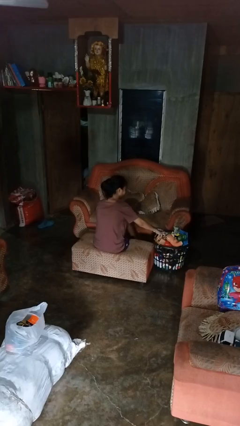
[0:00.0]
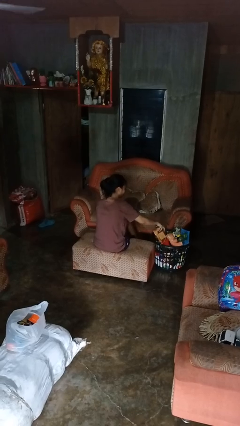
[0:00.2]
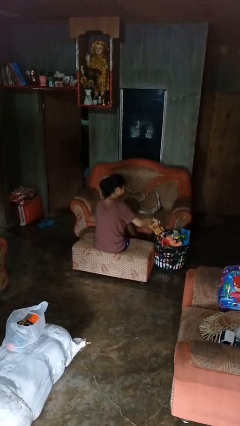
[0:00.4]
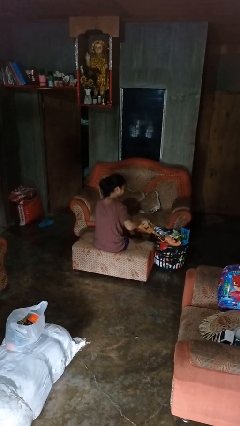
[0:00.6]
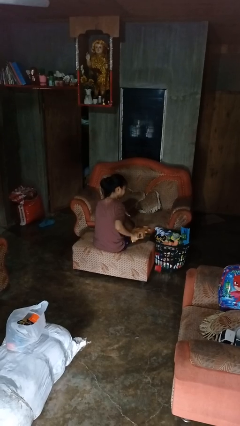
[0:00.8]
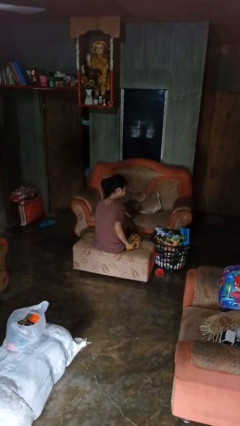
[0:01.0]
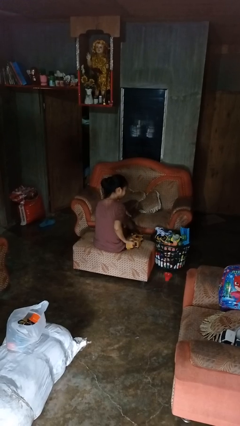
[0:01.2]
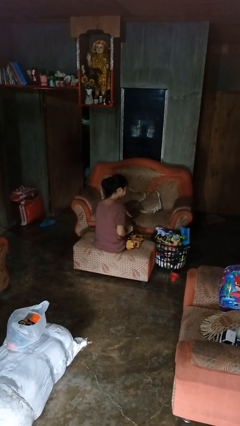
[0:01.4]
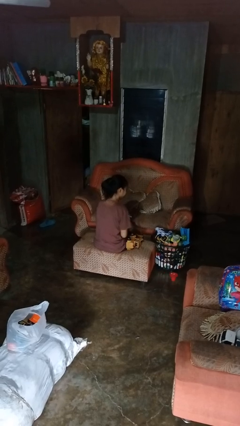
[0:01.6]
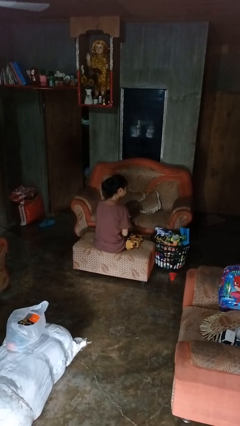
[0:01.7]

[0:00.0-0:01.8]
person takes object from basket

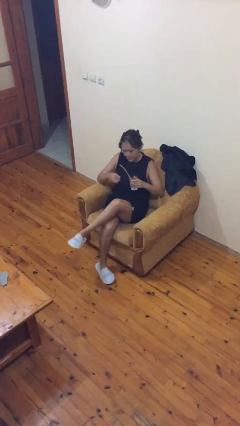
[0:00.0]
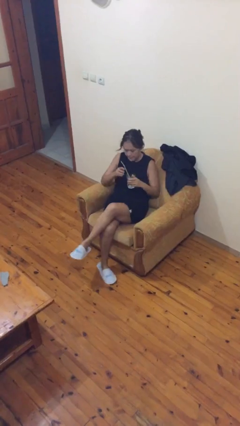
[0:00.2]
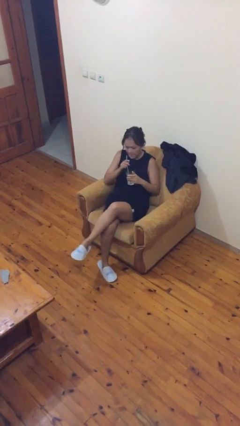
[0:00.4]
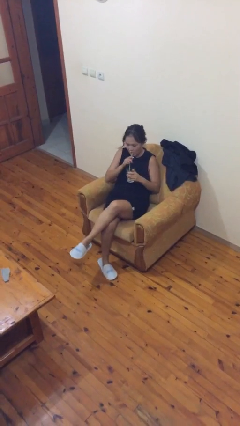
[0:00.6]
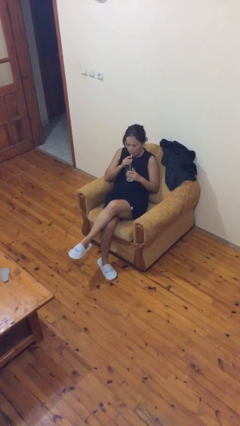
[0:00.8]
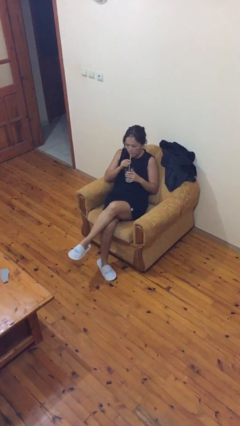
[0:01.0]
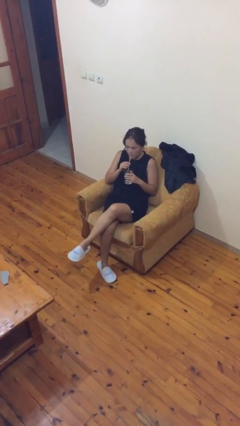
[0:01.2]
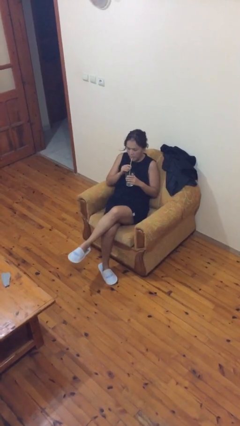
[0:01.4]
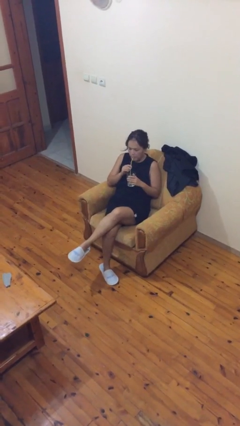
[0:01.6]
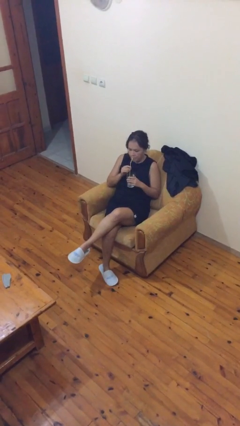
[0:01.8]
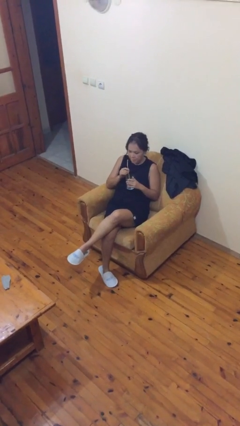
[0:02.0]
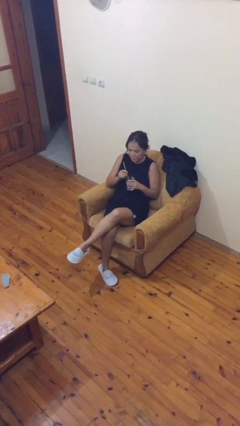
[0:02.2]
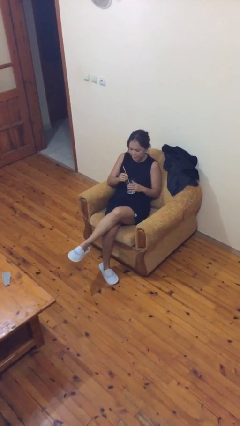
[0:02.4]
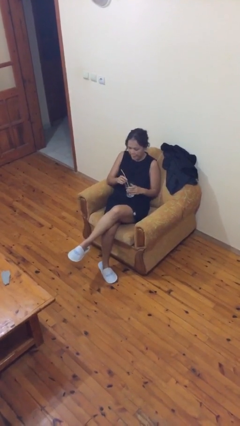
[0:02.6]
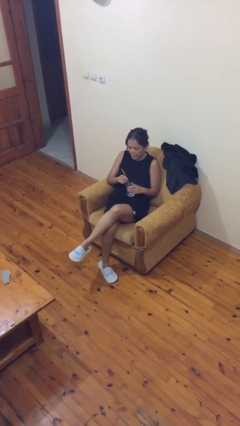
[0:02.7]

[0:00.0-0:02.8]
person drinks from straw

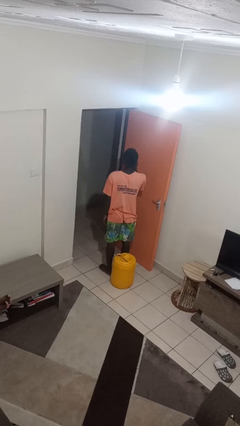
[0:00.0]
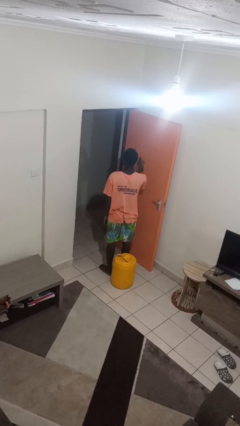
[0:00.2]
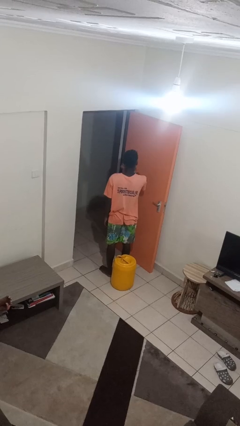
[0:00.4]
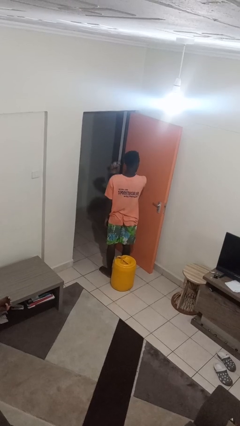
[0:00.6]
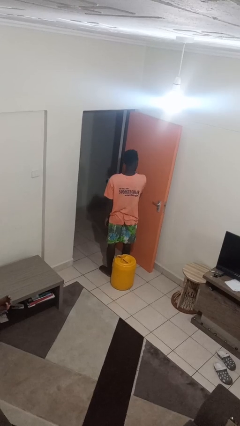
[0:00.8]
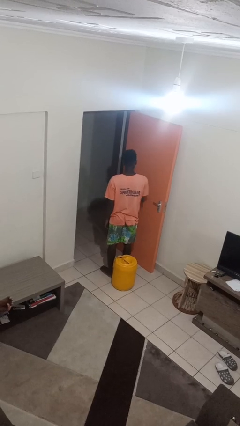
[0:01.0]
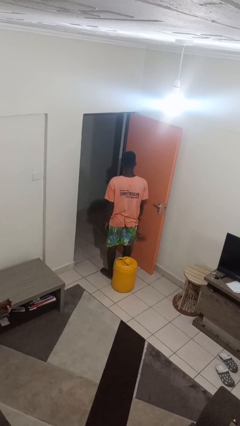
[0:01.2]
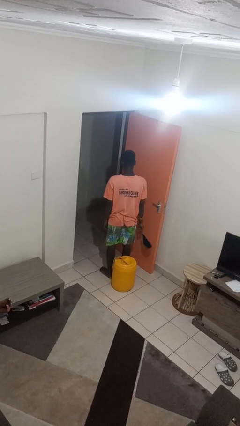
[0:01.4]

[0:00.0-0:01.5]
person takes off facemask

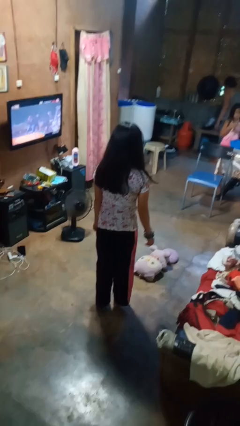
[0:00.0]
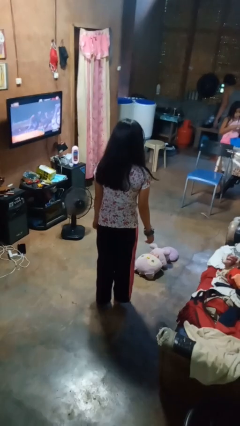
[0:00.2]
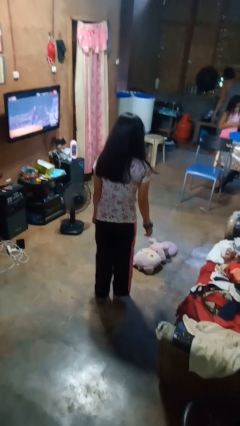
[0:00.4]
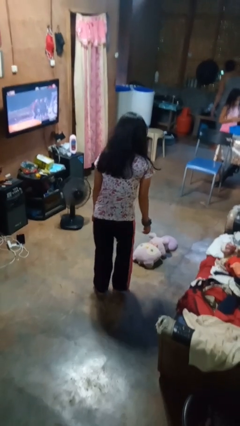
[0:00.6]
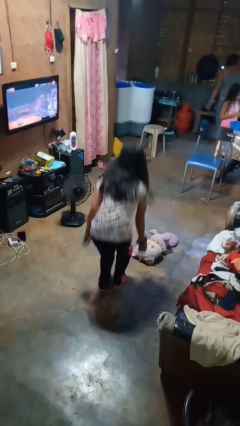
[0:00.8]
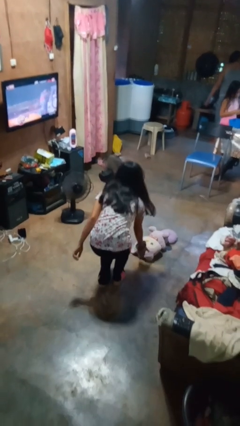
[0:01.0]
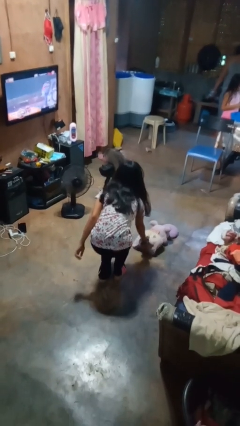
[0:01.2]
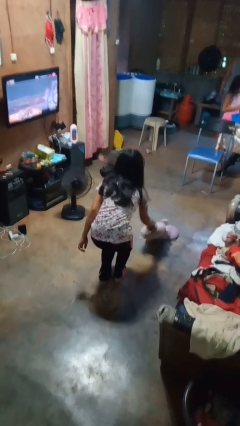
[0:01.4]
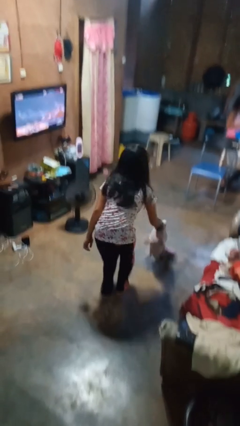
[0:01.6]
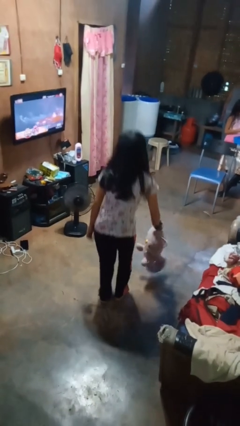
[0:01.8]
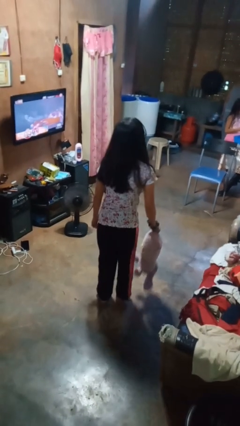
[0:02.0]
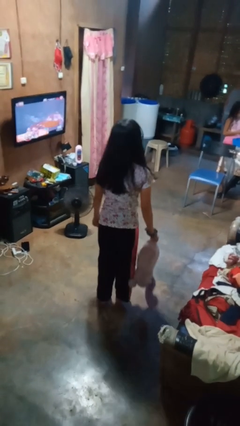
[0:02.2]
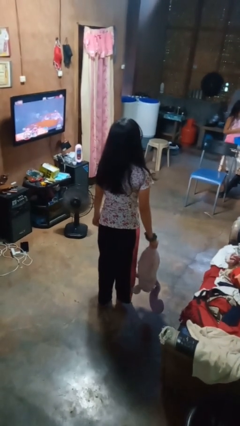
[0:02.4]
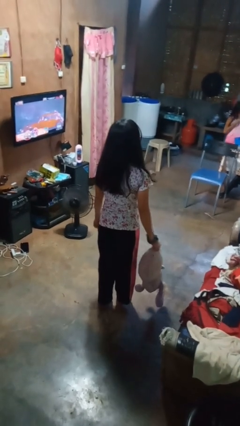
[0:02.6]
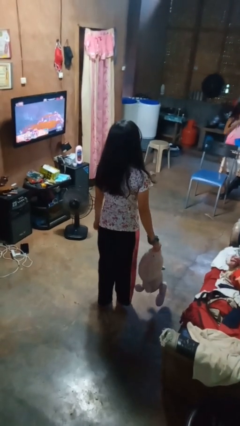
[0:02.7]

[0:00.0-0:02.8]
person picks up object from floor

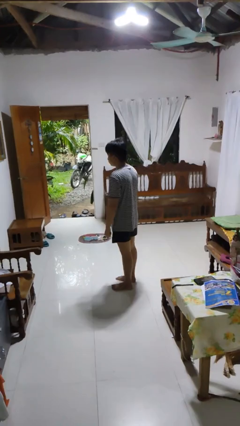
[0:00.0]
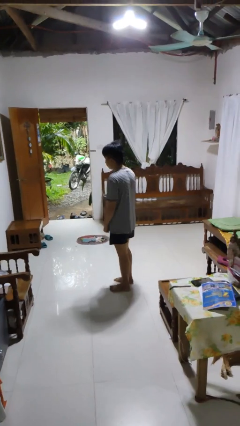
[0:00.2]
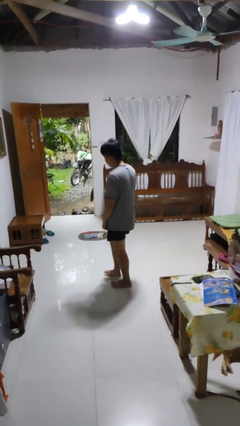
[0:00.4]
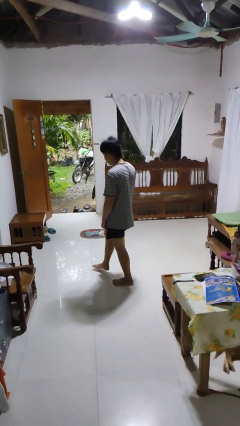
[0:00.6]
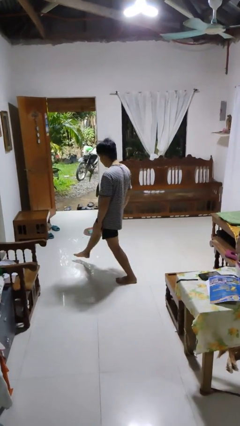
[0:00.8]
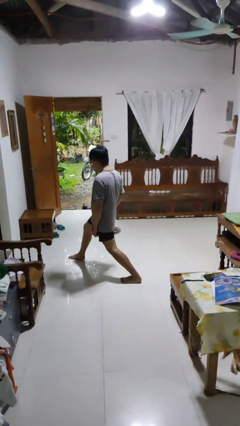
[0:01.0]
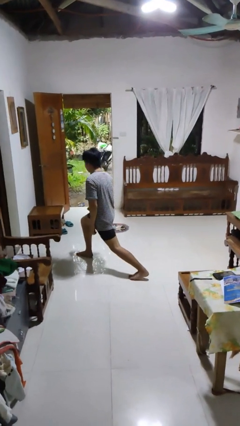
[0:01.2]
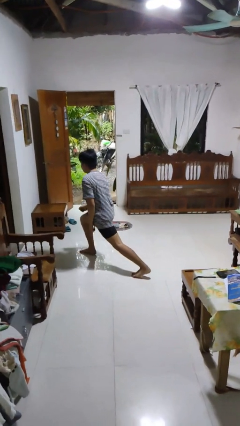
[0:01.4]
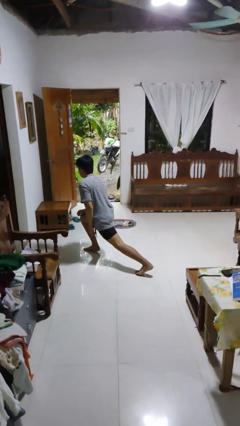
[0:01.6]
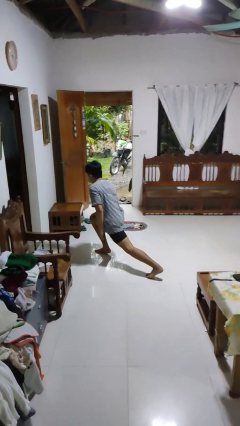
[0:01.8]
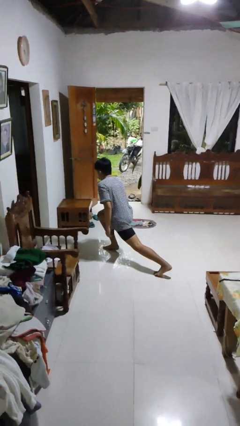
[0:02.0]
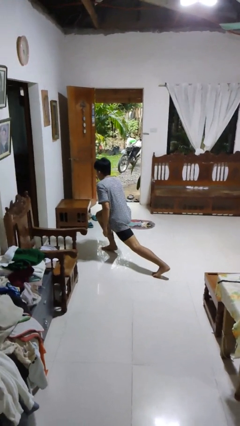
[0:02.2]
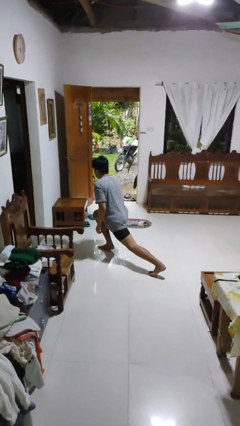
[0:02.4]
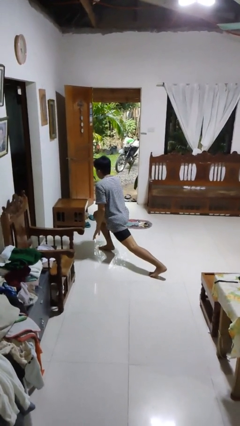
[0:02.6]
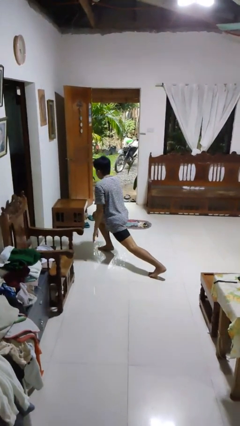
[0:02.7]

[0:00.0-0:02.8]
person exercises with lunges

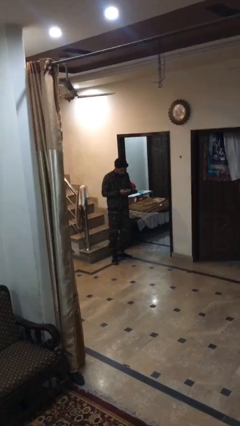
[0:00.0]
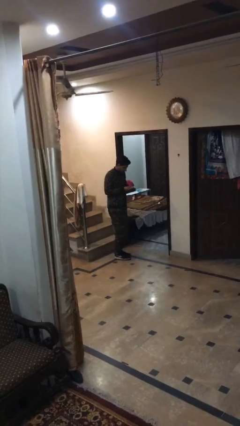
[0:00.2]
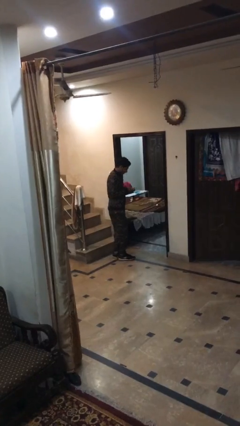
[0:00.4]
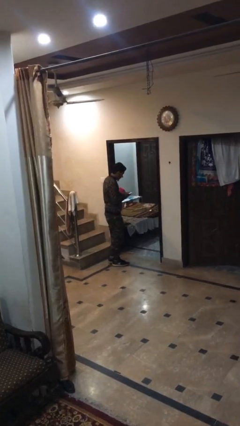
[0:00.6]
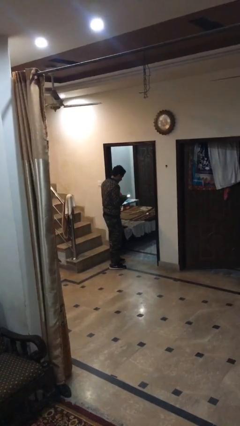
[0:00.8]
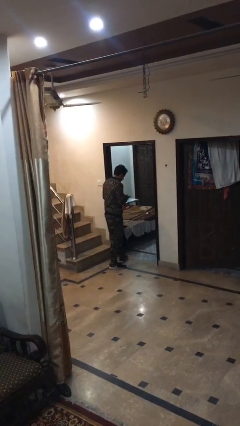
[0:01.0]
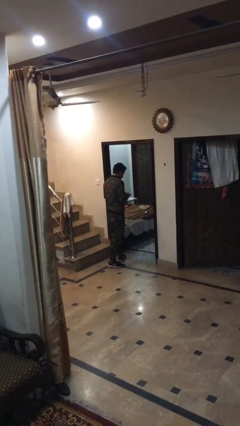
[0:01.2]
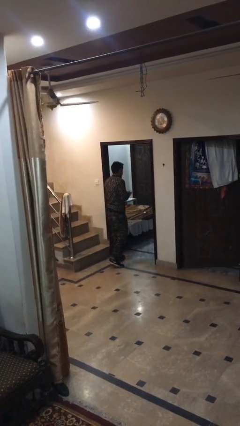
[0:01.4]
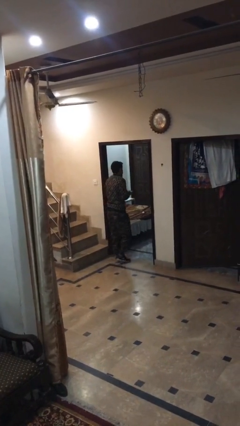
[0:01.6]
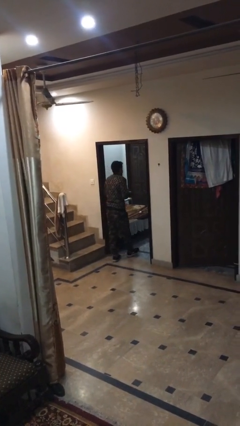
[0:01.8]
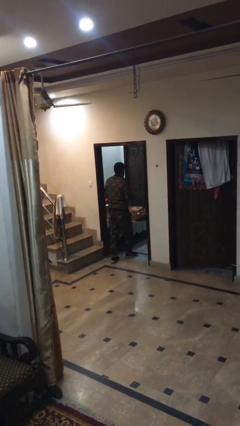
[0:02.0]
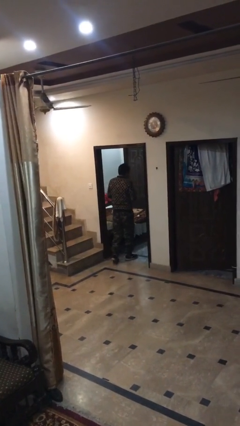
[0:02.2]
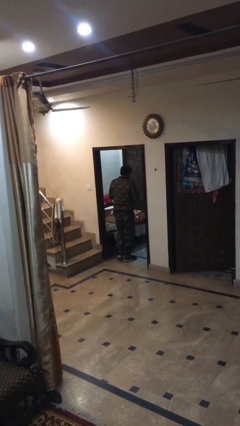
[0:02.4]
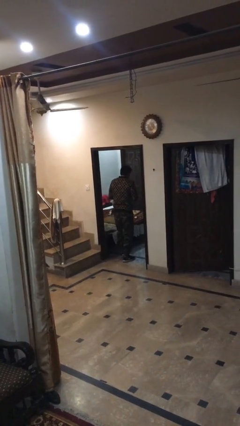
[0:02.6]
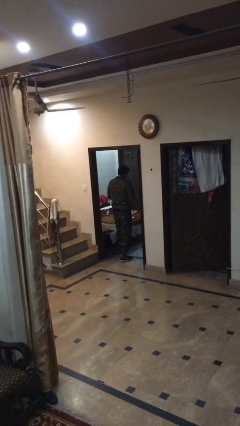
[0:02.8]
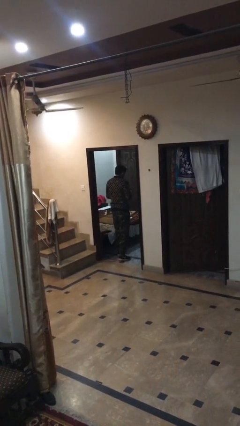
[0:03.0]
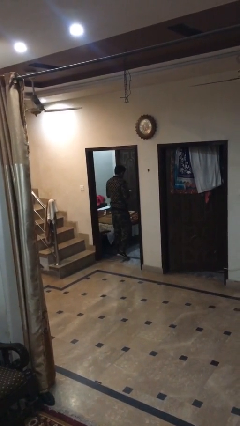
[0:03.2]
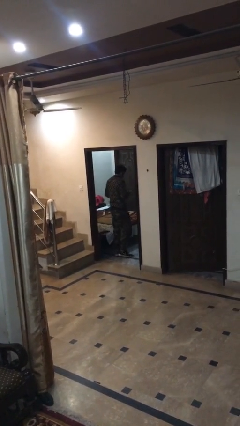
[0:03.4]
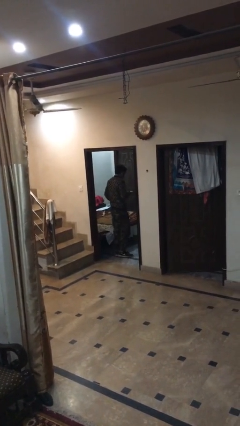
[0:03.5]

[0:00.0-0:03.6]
person enters scene through structure

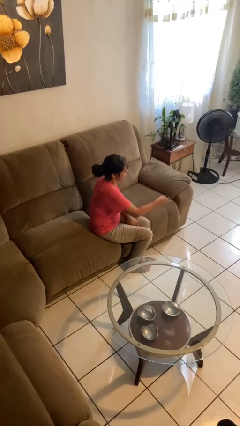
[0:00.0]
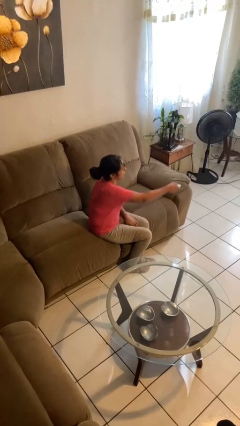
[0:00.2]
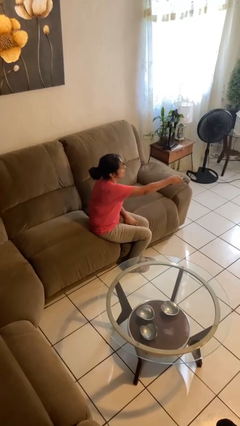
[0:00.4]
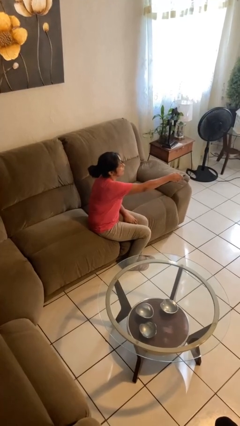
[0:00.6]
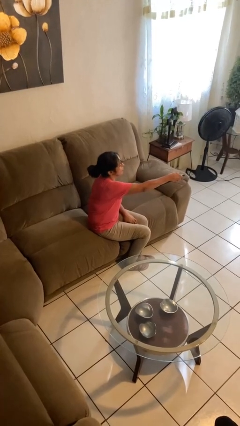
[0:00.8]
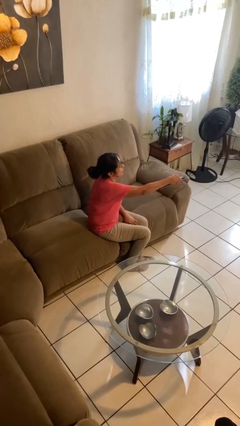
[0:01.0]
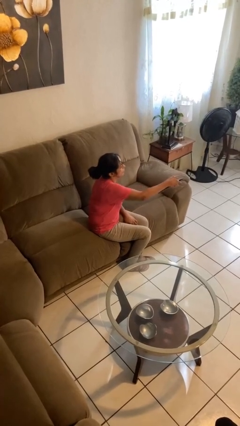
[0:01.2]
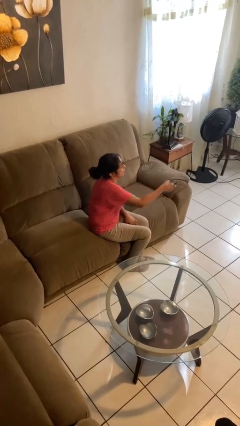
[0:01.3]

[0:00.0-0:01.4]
person uses television remote

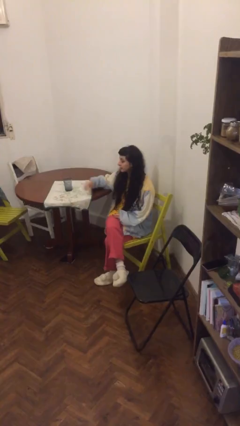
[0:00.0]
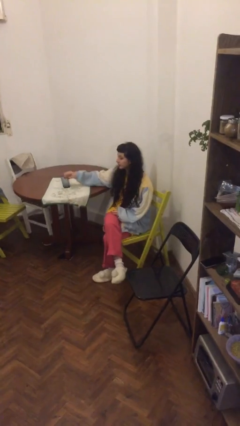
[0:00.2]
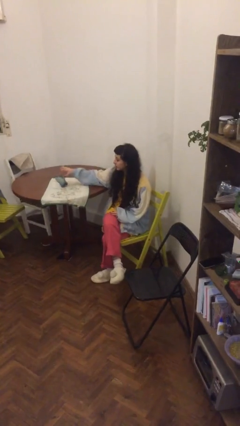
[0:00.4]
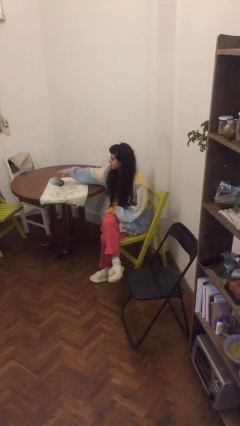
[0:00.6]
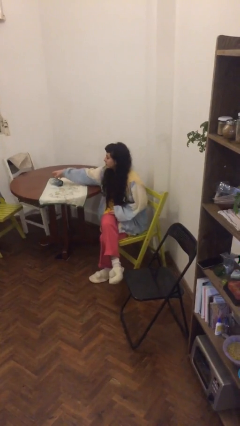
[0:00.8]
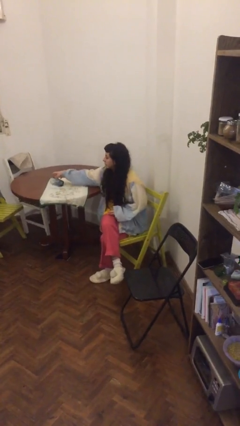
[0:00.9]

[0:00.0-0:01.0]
person knocks over glass
